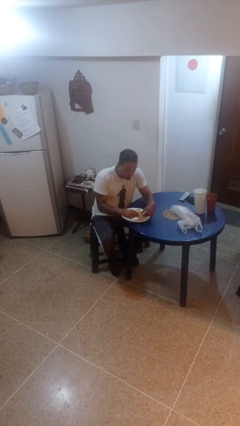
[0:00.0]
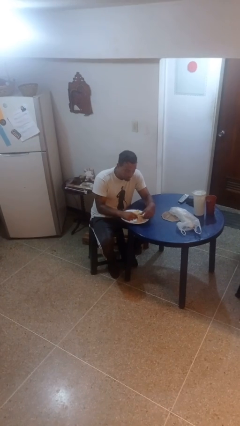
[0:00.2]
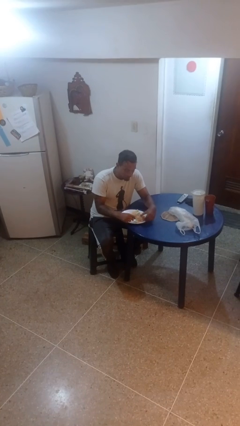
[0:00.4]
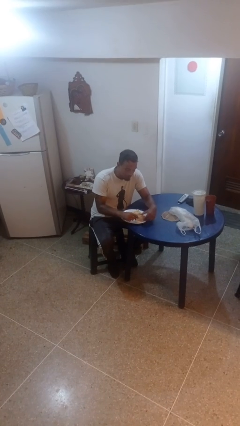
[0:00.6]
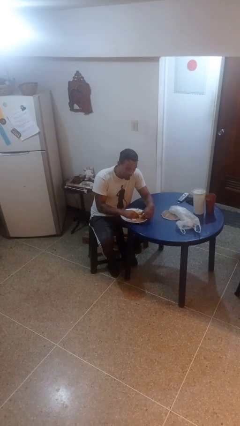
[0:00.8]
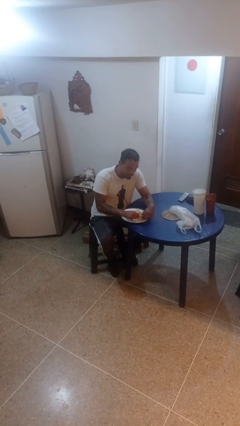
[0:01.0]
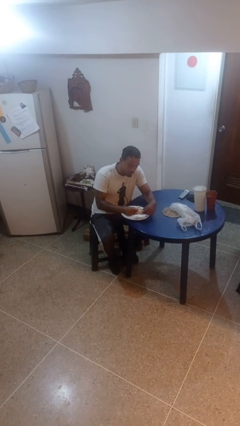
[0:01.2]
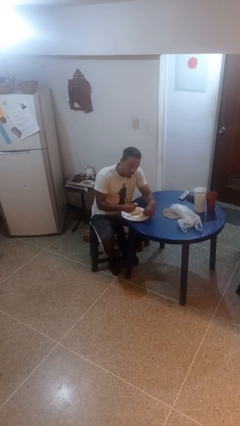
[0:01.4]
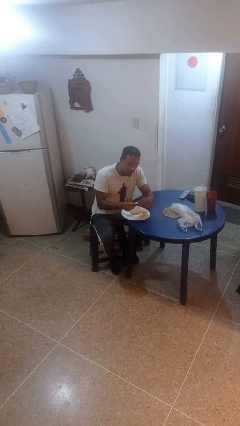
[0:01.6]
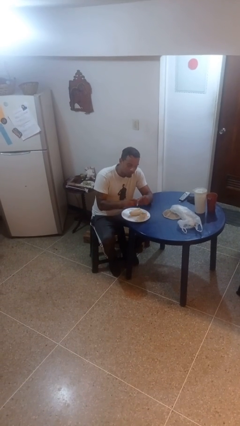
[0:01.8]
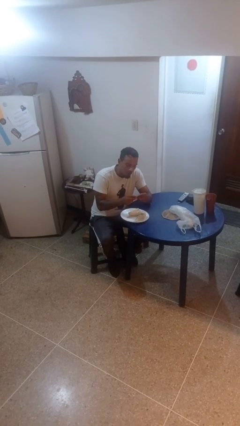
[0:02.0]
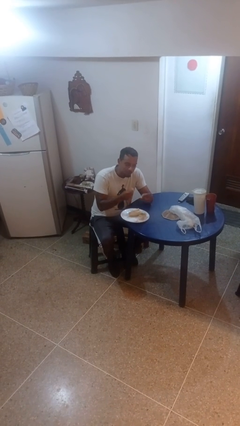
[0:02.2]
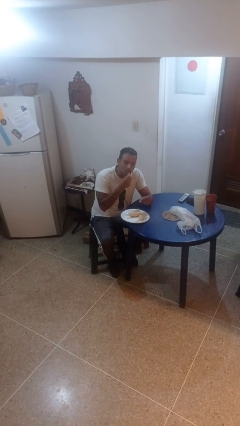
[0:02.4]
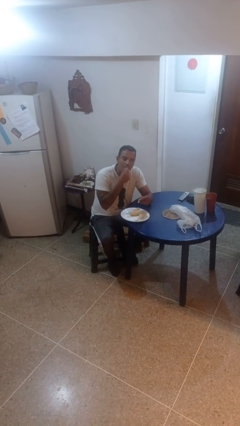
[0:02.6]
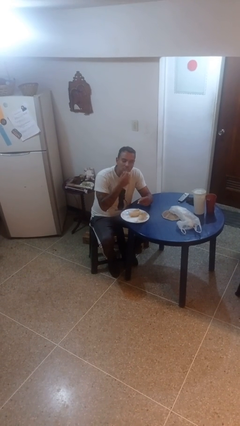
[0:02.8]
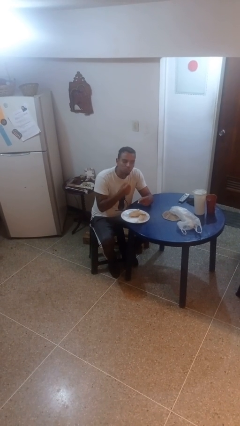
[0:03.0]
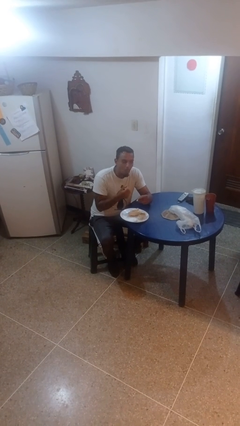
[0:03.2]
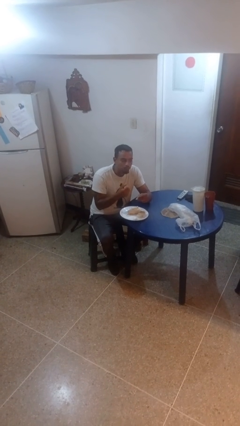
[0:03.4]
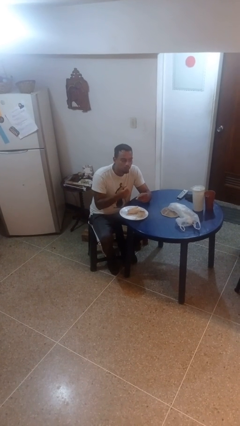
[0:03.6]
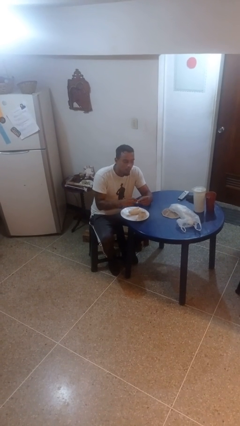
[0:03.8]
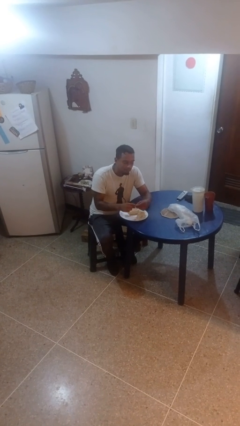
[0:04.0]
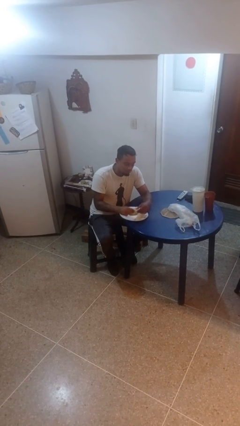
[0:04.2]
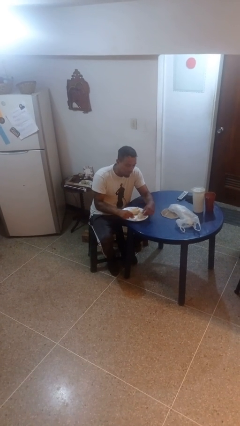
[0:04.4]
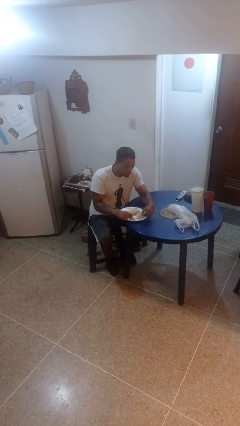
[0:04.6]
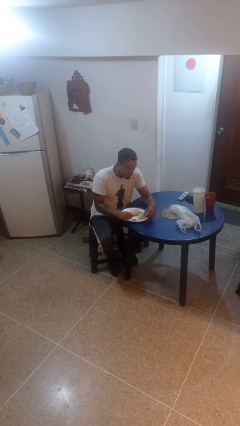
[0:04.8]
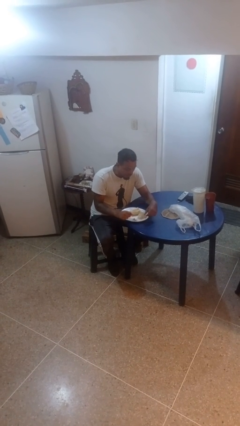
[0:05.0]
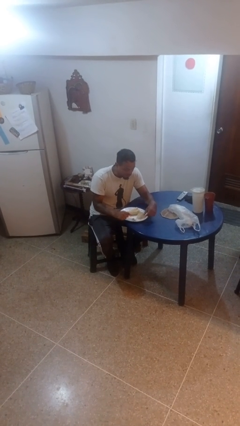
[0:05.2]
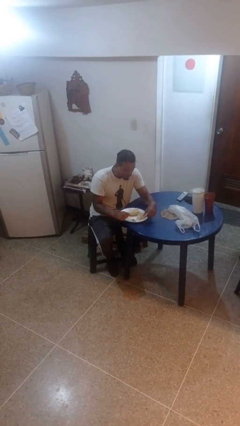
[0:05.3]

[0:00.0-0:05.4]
person eats with hands

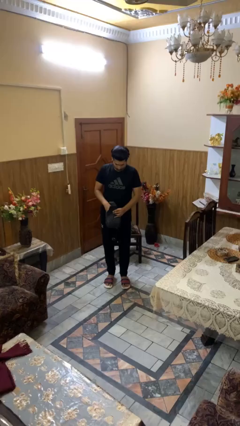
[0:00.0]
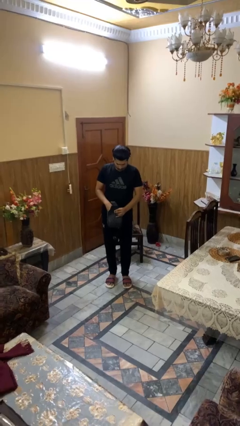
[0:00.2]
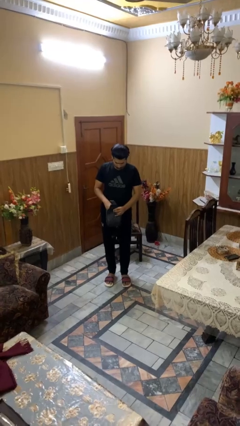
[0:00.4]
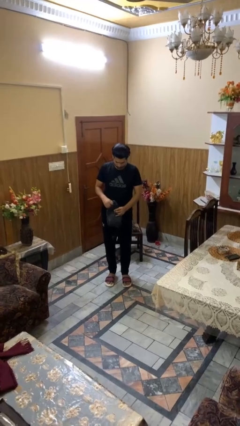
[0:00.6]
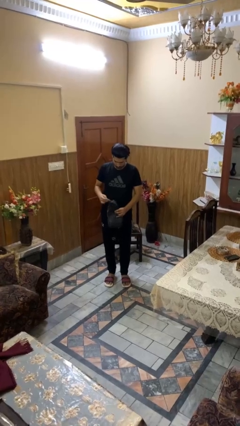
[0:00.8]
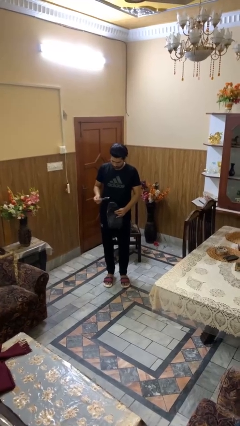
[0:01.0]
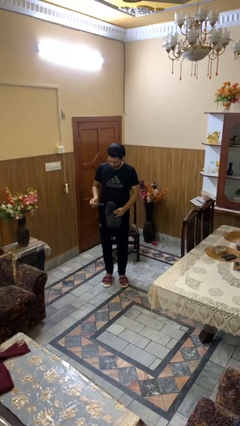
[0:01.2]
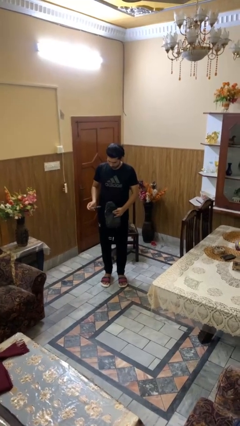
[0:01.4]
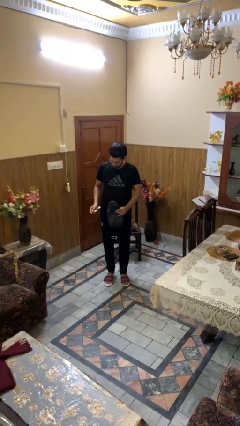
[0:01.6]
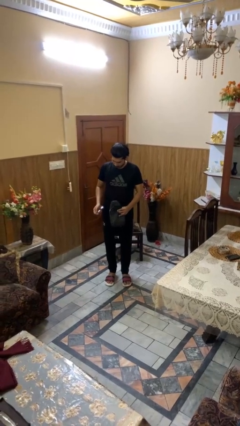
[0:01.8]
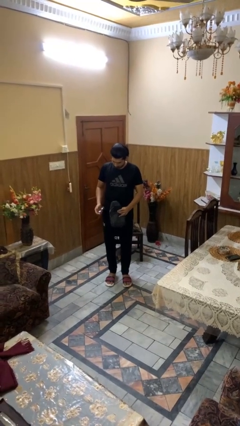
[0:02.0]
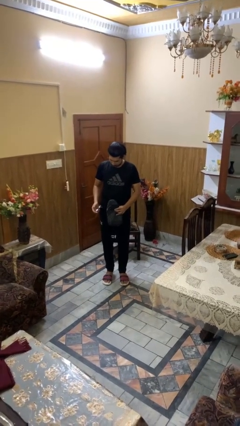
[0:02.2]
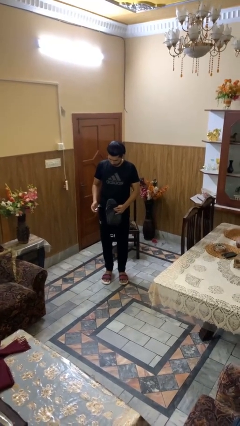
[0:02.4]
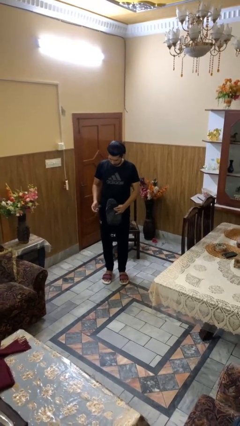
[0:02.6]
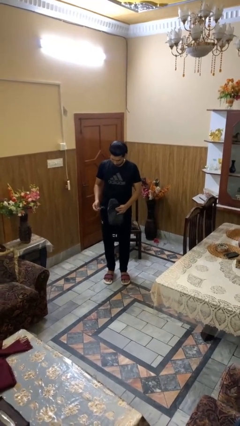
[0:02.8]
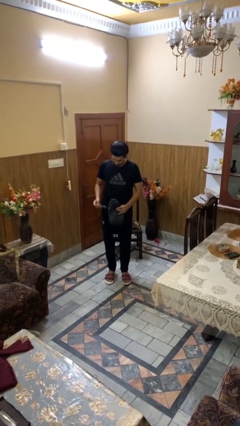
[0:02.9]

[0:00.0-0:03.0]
person takes object from purse

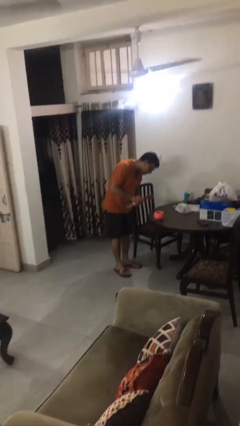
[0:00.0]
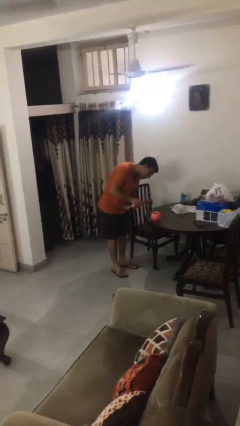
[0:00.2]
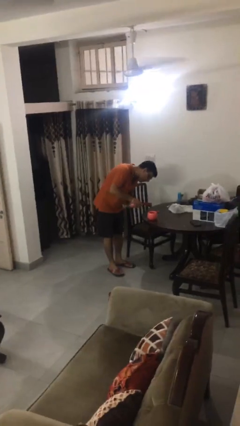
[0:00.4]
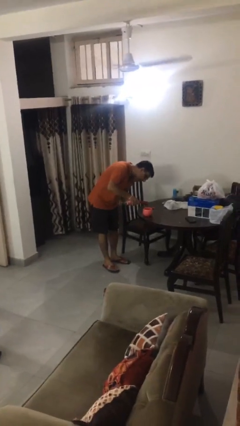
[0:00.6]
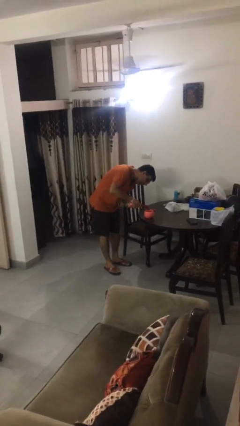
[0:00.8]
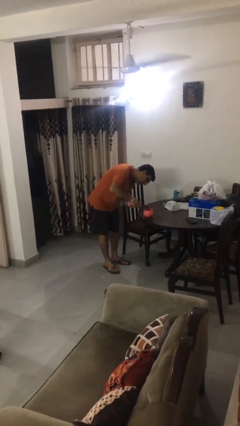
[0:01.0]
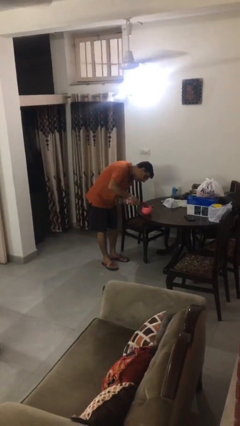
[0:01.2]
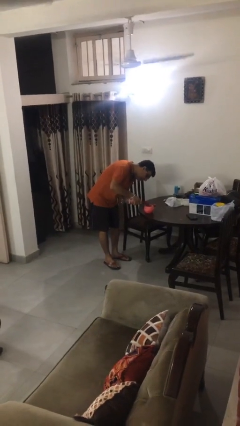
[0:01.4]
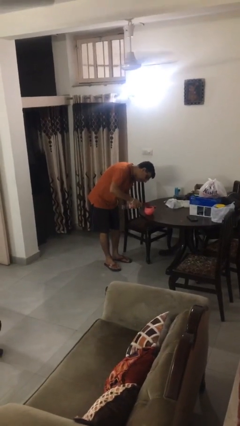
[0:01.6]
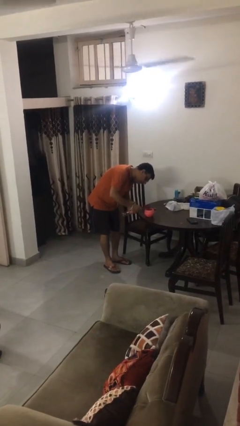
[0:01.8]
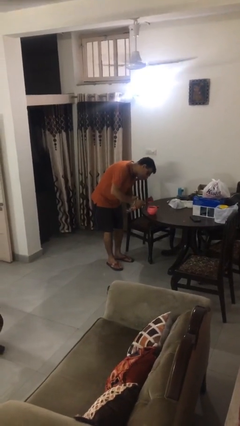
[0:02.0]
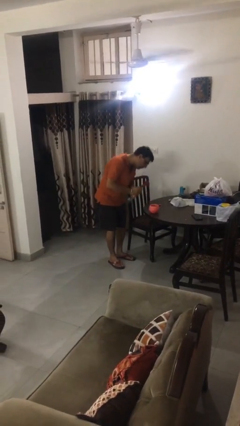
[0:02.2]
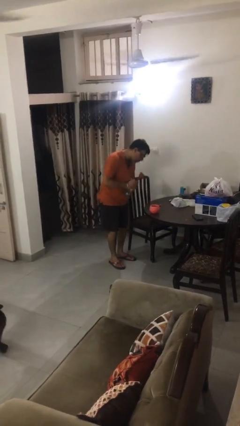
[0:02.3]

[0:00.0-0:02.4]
person waters houseplant

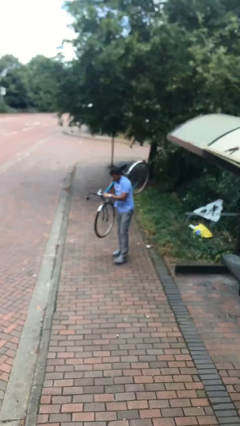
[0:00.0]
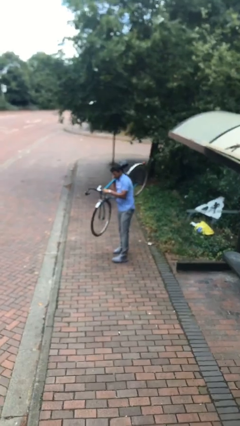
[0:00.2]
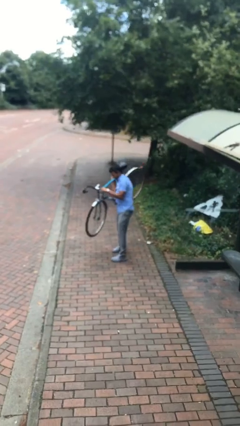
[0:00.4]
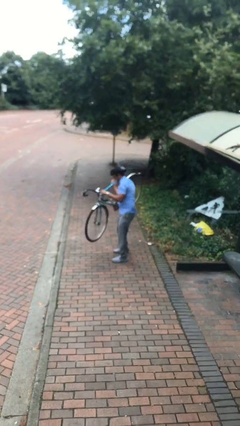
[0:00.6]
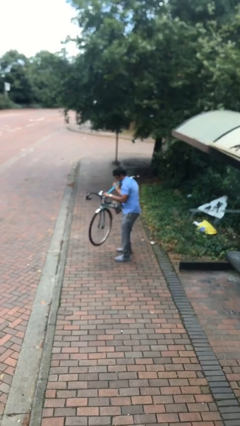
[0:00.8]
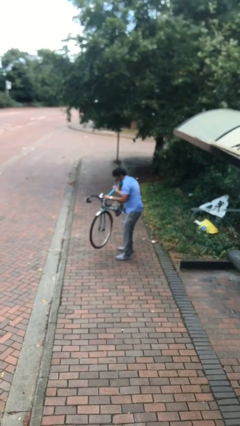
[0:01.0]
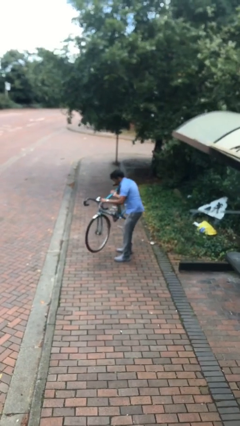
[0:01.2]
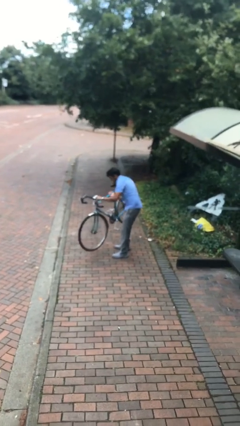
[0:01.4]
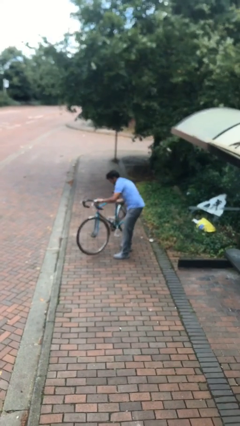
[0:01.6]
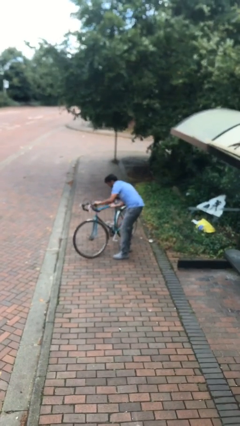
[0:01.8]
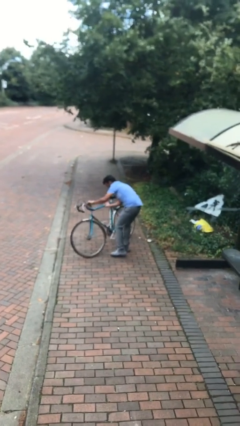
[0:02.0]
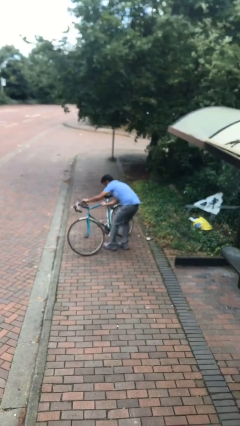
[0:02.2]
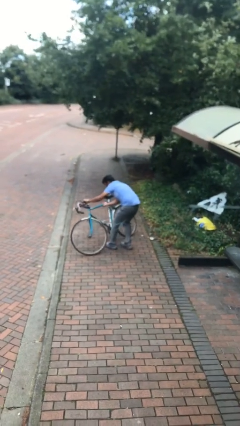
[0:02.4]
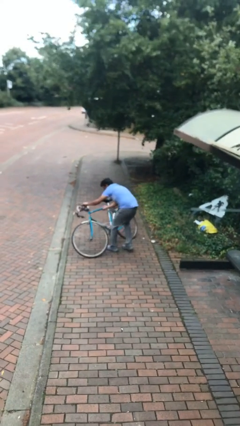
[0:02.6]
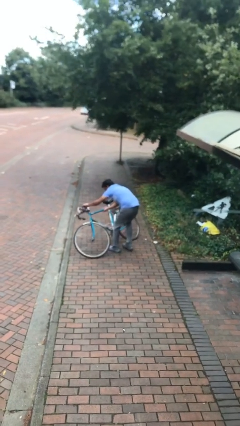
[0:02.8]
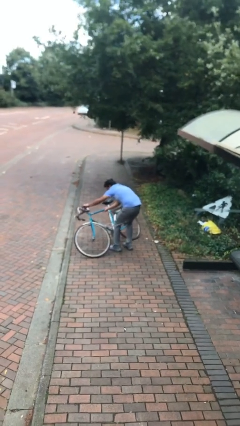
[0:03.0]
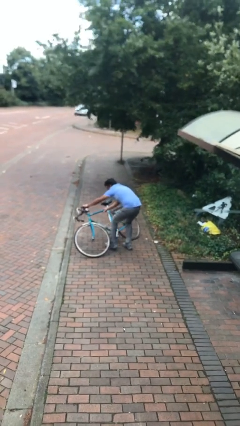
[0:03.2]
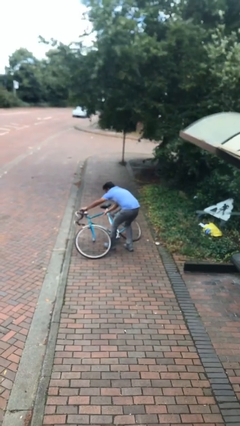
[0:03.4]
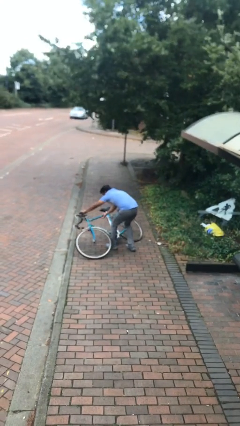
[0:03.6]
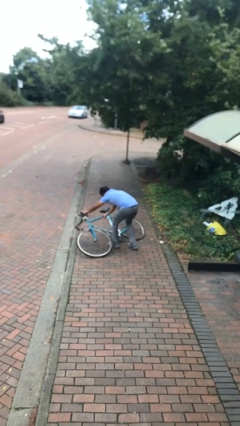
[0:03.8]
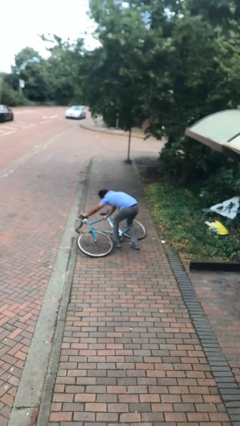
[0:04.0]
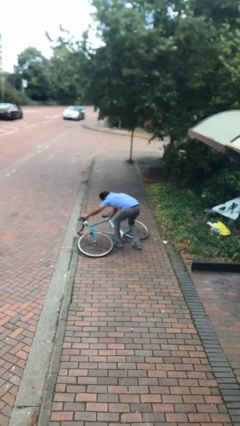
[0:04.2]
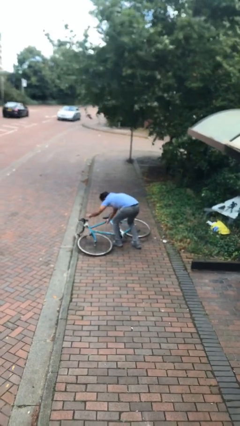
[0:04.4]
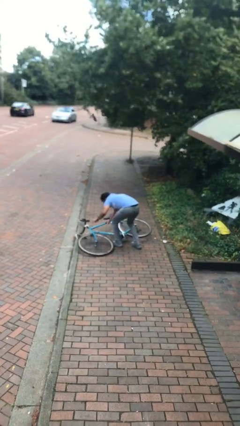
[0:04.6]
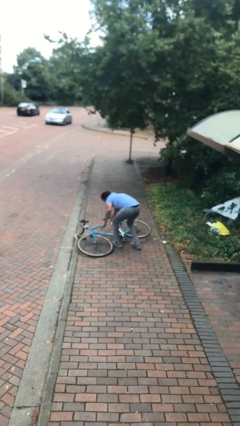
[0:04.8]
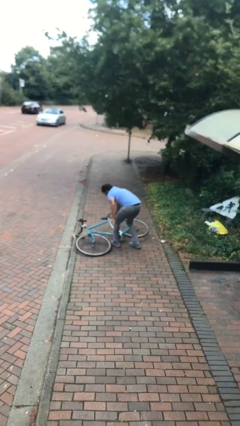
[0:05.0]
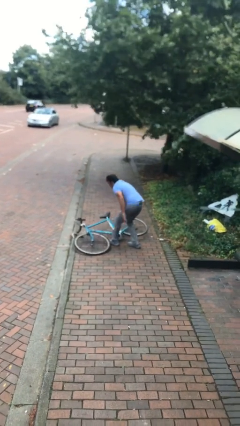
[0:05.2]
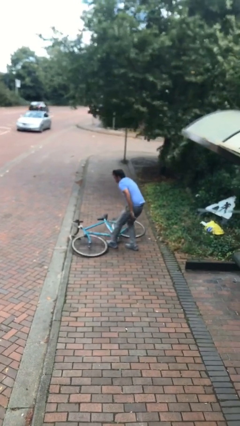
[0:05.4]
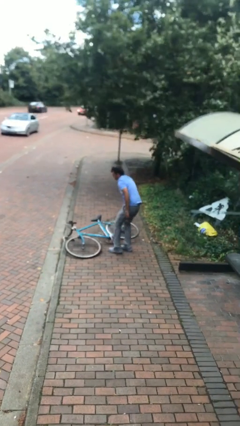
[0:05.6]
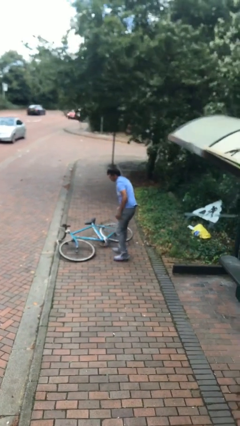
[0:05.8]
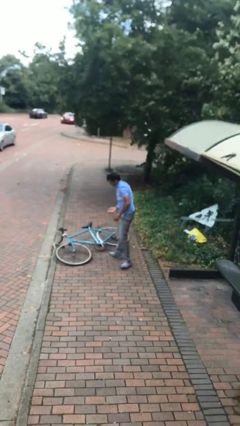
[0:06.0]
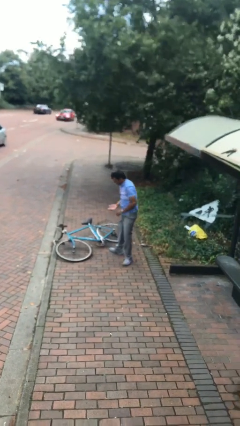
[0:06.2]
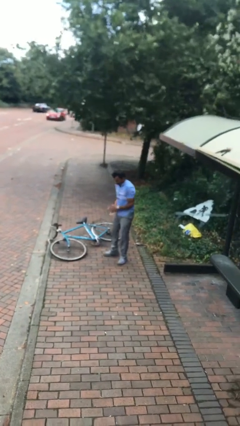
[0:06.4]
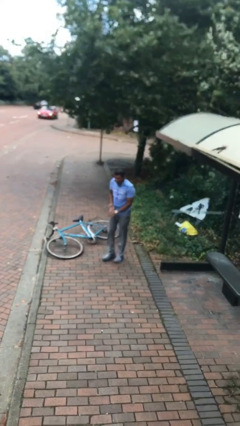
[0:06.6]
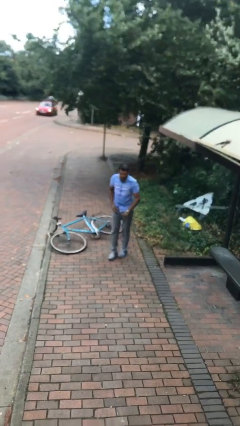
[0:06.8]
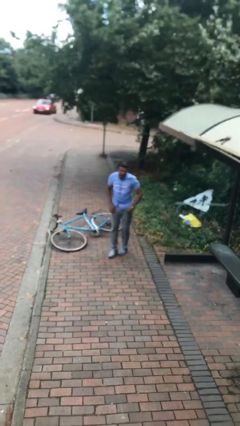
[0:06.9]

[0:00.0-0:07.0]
person puts down object on floor
